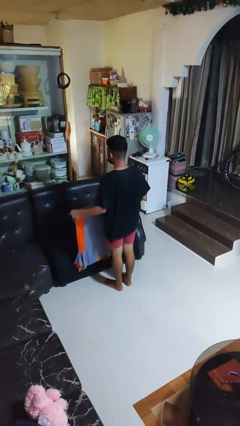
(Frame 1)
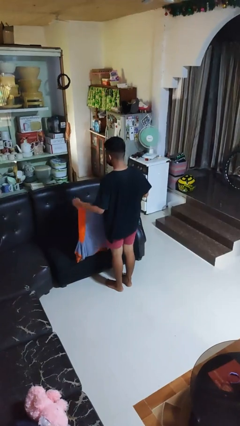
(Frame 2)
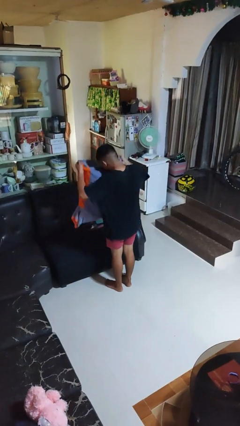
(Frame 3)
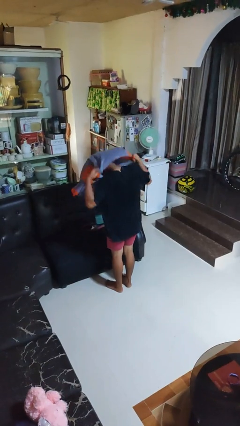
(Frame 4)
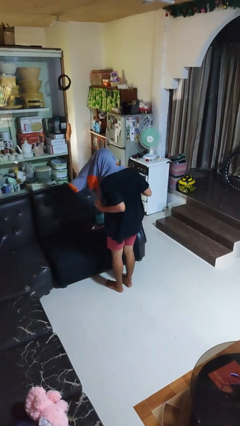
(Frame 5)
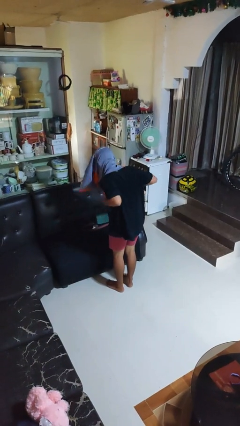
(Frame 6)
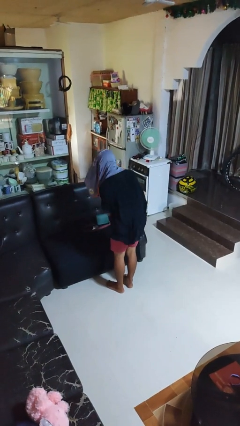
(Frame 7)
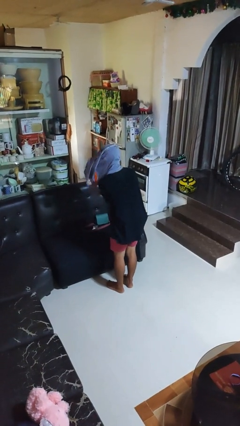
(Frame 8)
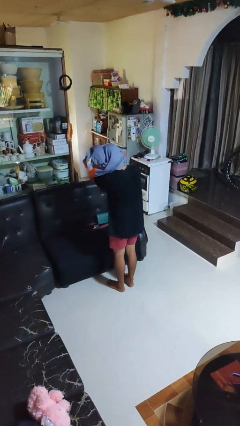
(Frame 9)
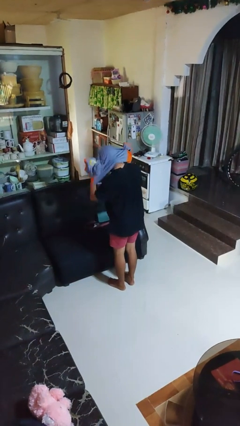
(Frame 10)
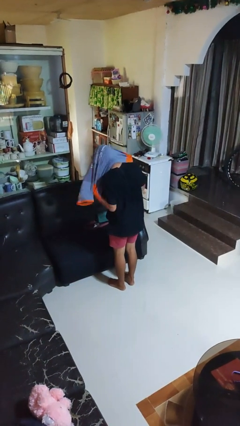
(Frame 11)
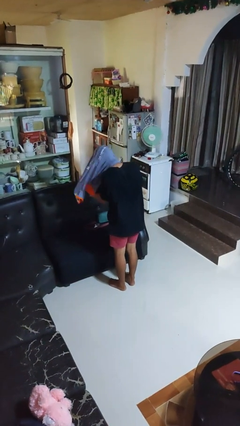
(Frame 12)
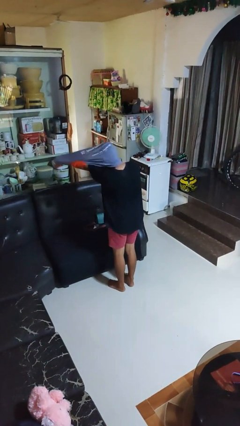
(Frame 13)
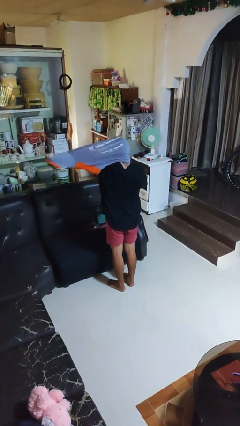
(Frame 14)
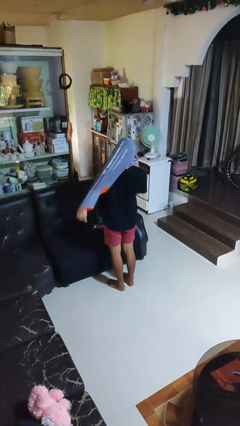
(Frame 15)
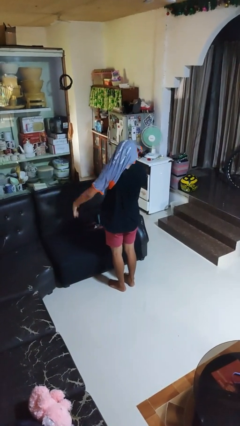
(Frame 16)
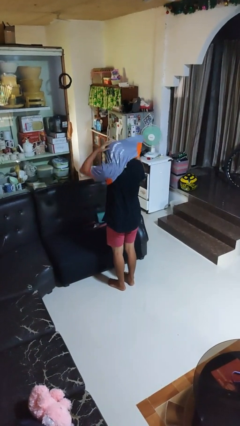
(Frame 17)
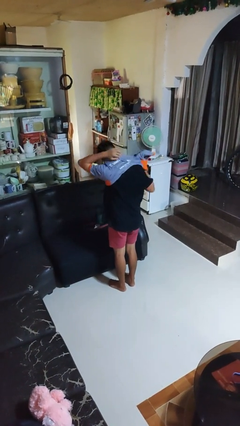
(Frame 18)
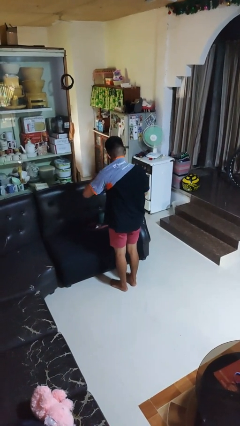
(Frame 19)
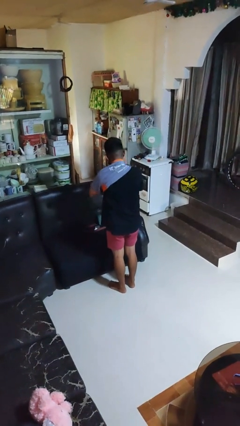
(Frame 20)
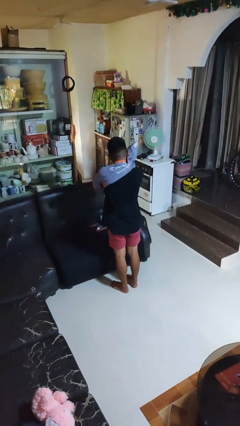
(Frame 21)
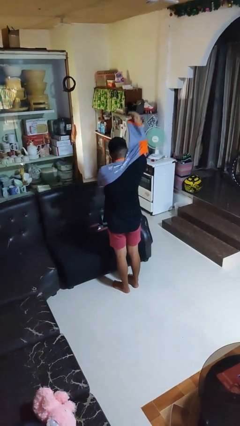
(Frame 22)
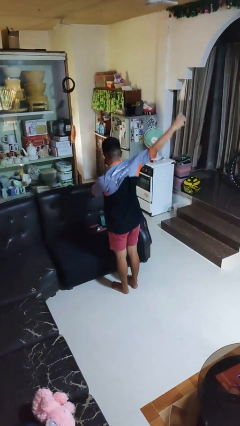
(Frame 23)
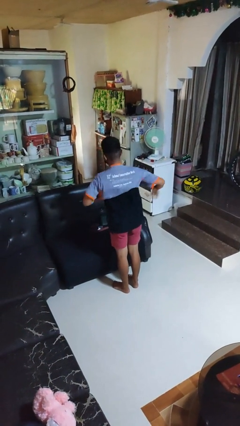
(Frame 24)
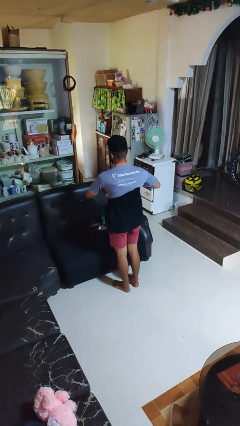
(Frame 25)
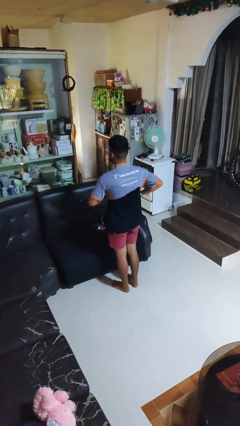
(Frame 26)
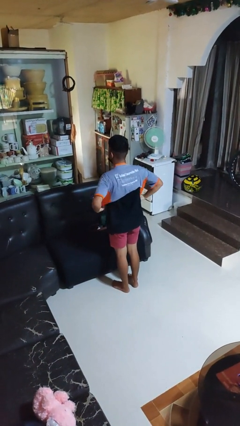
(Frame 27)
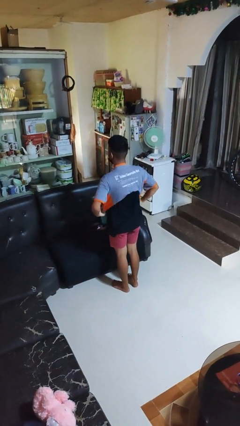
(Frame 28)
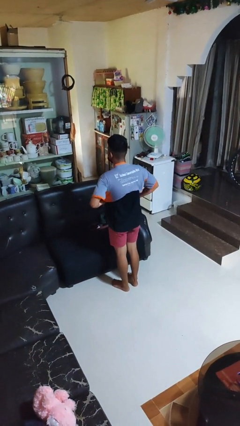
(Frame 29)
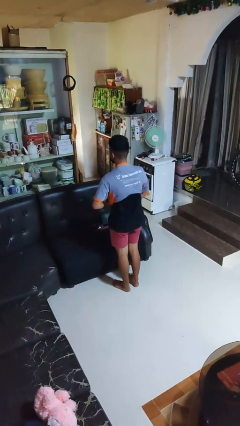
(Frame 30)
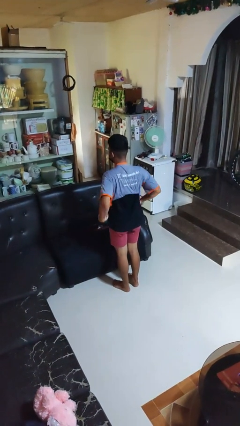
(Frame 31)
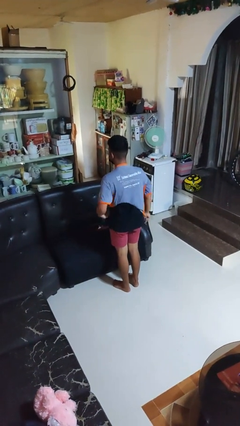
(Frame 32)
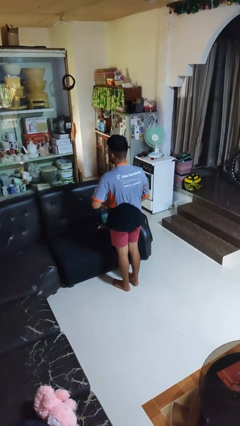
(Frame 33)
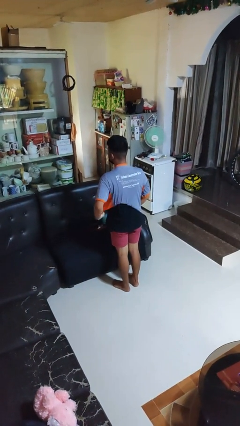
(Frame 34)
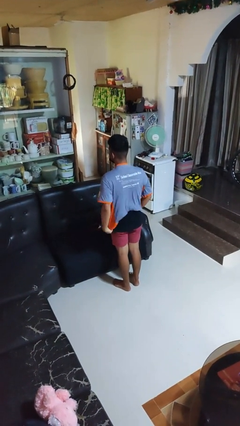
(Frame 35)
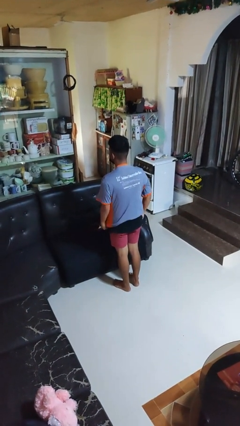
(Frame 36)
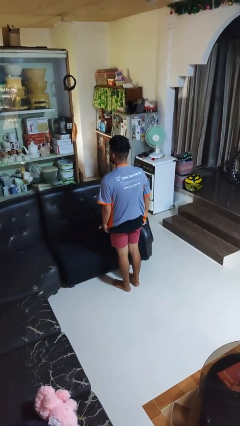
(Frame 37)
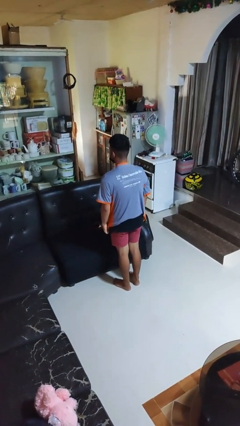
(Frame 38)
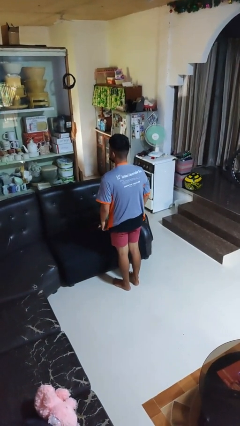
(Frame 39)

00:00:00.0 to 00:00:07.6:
person puts on shirt

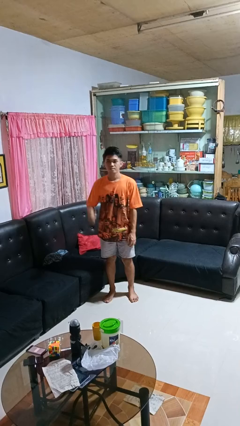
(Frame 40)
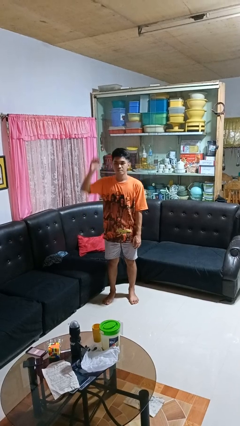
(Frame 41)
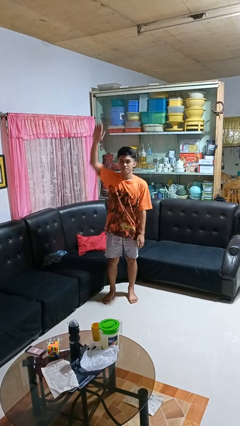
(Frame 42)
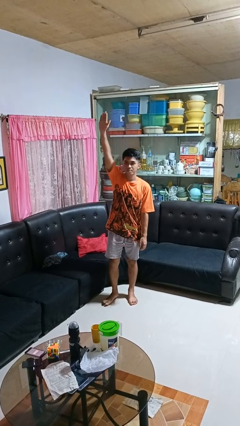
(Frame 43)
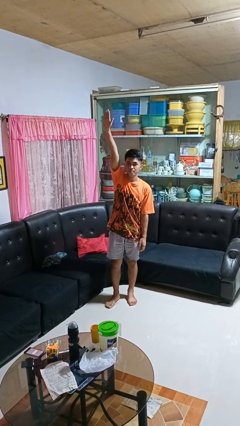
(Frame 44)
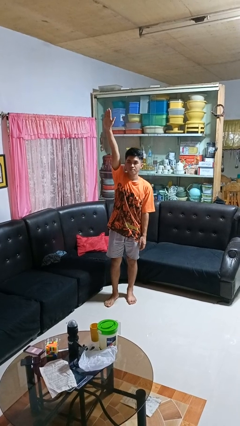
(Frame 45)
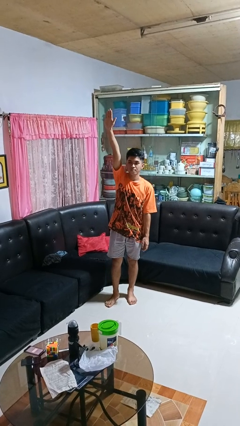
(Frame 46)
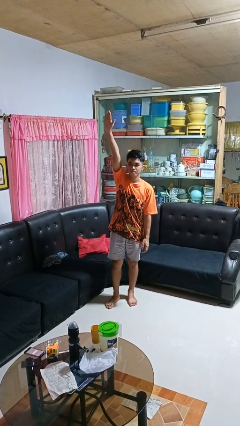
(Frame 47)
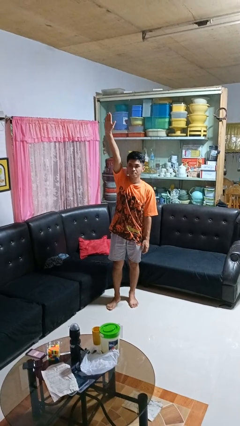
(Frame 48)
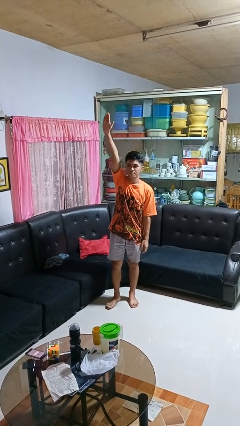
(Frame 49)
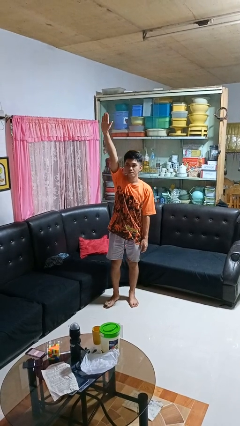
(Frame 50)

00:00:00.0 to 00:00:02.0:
person gestures raise hand

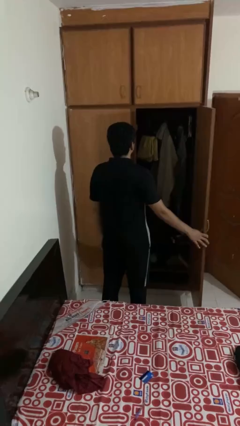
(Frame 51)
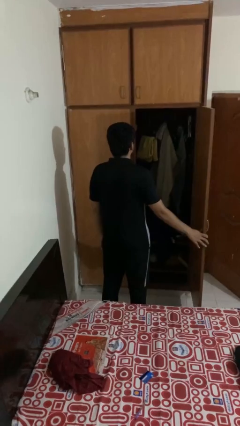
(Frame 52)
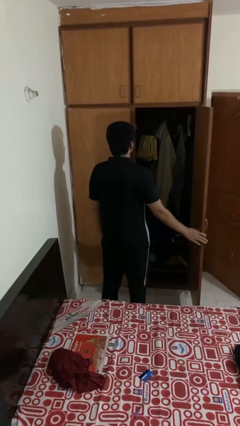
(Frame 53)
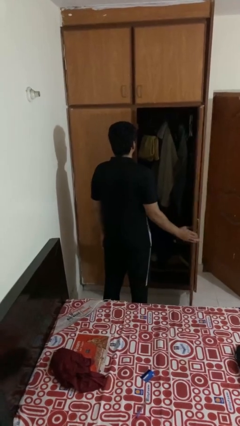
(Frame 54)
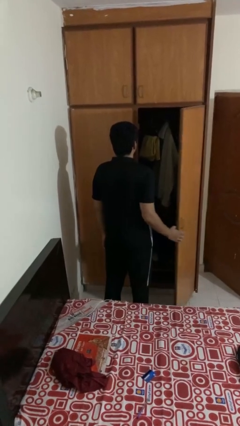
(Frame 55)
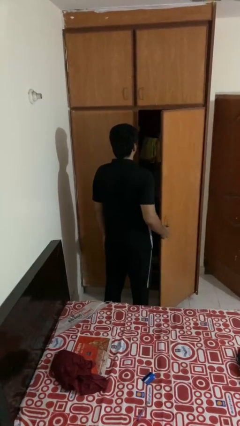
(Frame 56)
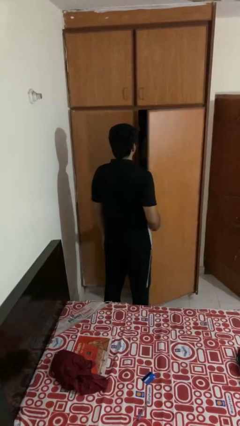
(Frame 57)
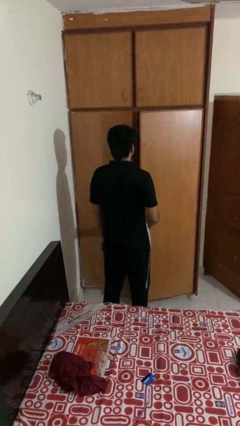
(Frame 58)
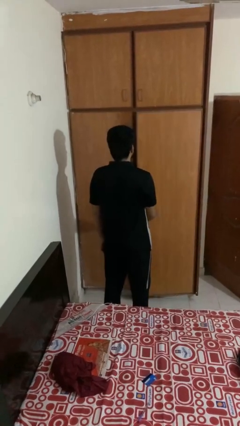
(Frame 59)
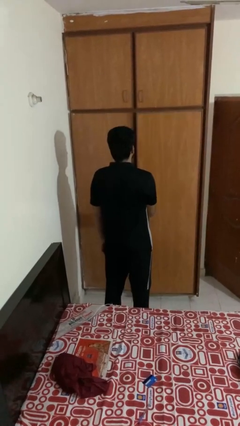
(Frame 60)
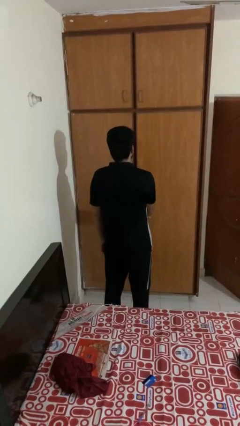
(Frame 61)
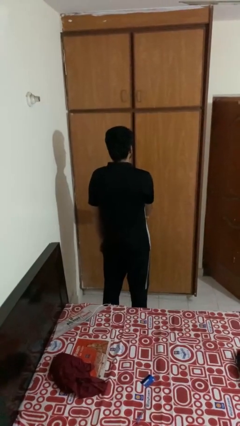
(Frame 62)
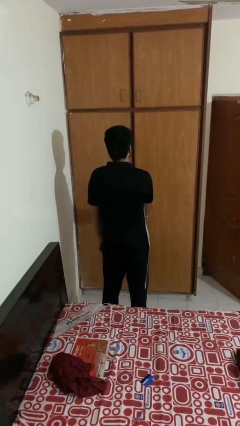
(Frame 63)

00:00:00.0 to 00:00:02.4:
person closes closet door

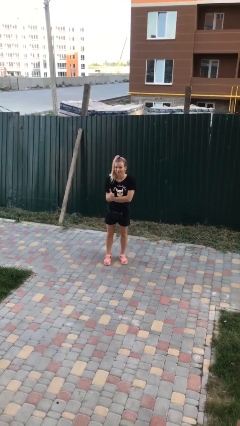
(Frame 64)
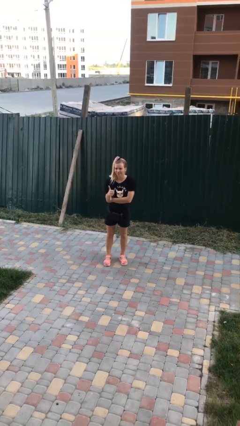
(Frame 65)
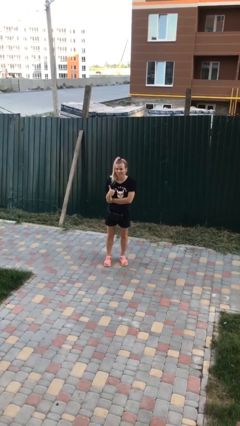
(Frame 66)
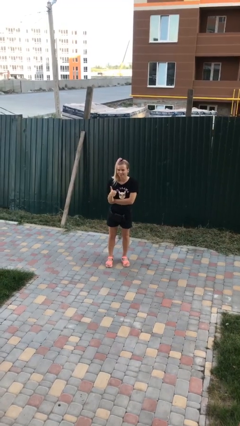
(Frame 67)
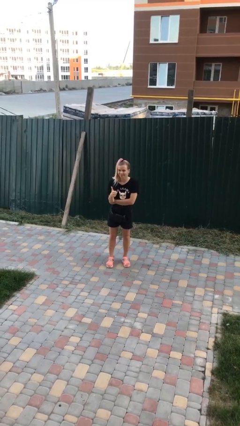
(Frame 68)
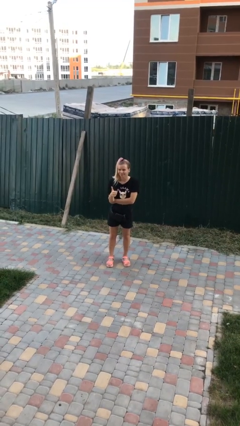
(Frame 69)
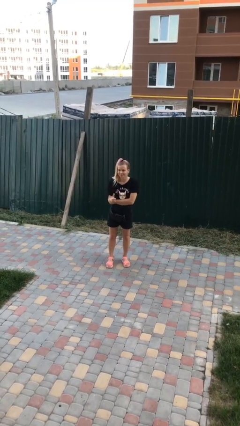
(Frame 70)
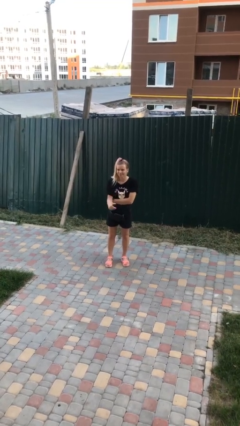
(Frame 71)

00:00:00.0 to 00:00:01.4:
person gestures thumbs up

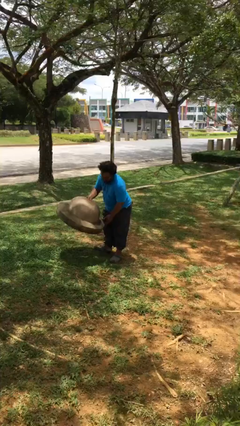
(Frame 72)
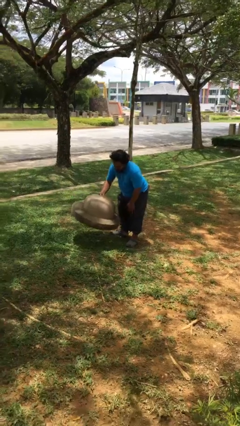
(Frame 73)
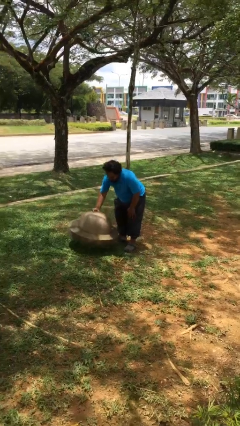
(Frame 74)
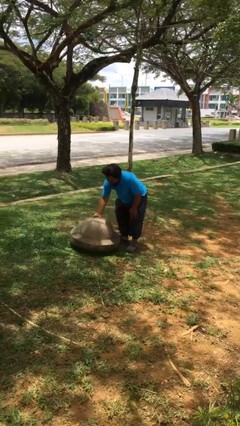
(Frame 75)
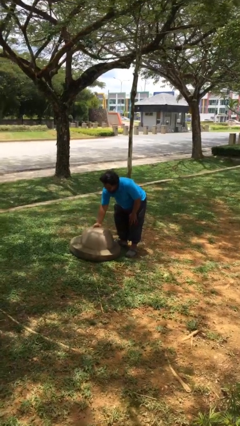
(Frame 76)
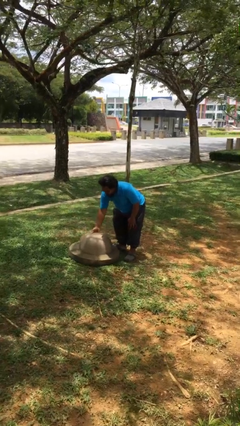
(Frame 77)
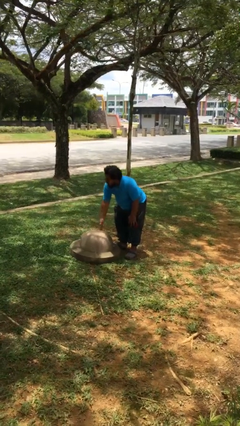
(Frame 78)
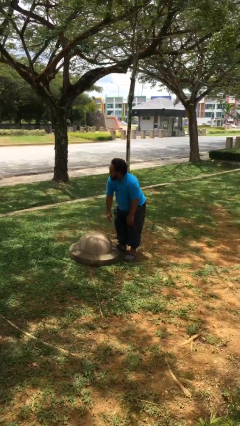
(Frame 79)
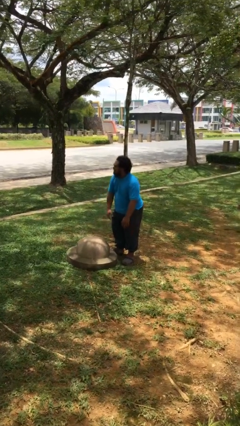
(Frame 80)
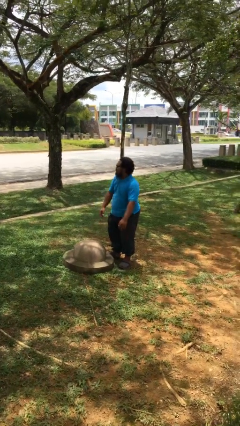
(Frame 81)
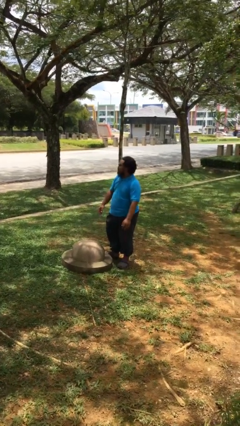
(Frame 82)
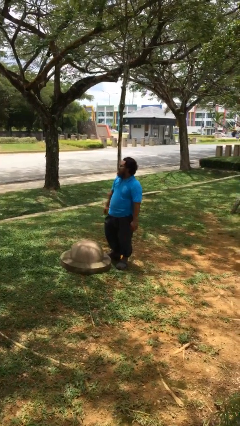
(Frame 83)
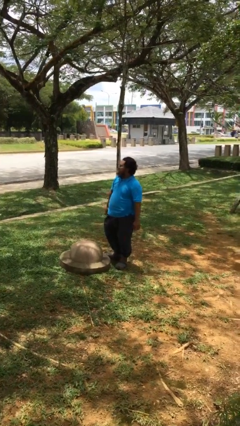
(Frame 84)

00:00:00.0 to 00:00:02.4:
person puts down object on floor

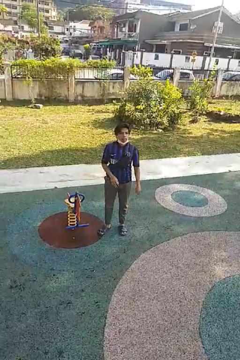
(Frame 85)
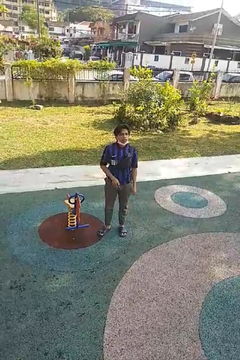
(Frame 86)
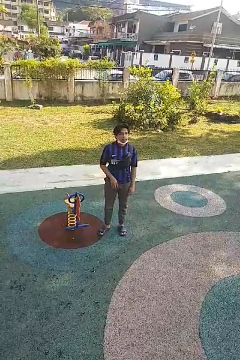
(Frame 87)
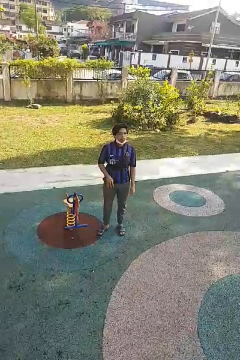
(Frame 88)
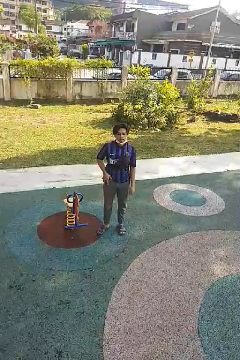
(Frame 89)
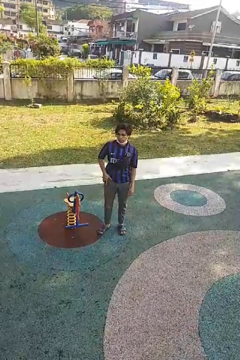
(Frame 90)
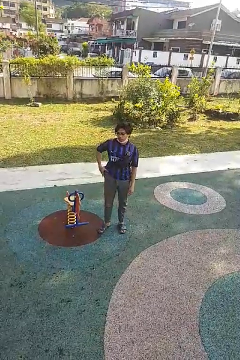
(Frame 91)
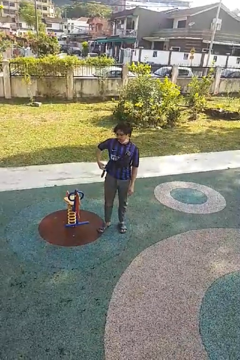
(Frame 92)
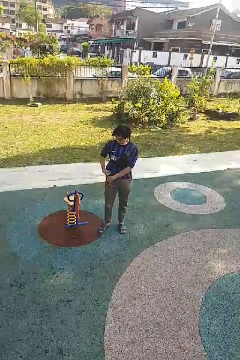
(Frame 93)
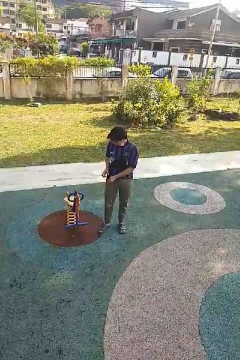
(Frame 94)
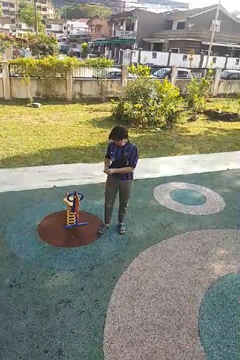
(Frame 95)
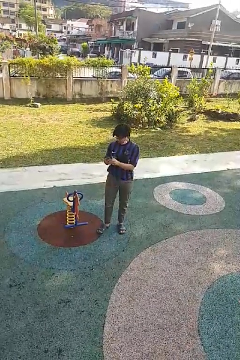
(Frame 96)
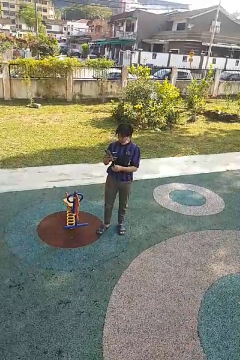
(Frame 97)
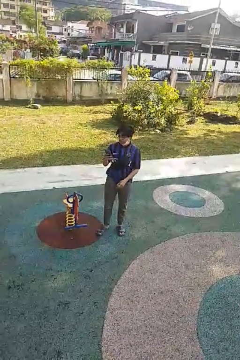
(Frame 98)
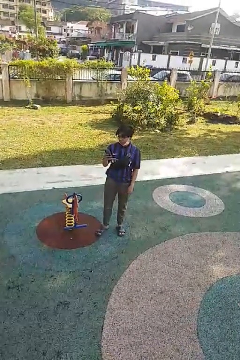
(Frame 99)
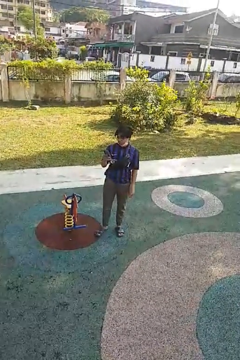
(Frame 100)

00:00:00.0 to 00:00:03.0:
person takes phone from pocket
